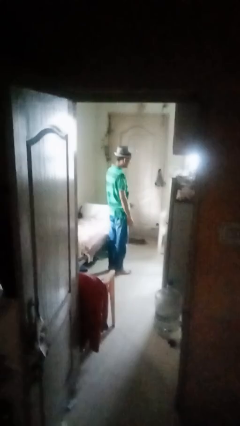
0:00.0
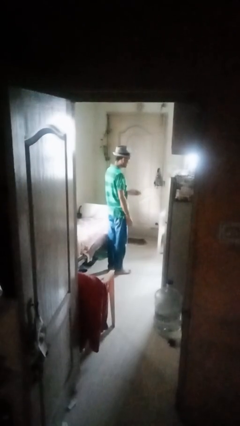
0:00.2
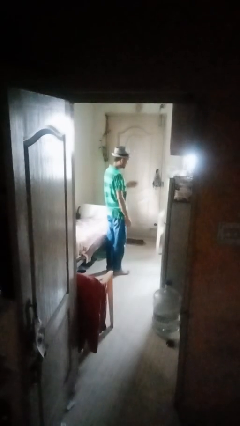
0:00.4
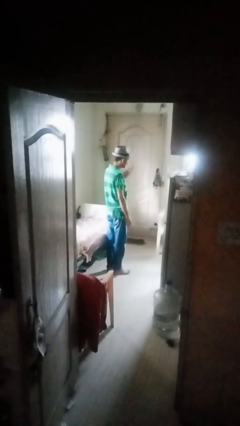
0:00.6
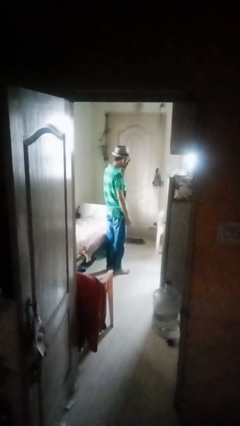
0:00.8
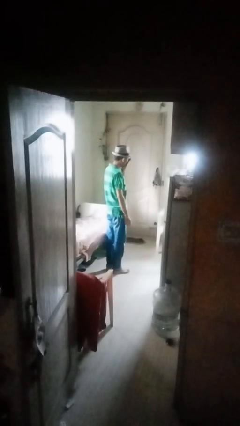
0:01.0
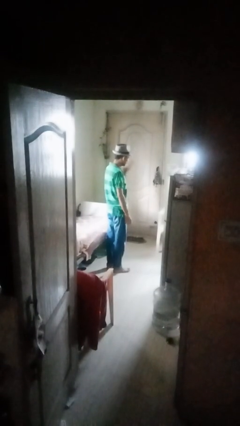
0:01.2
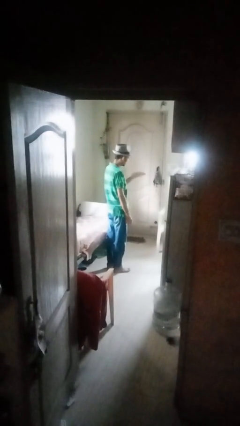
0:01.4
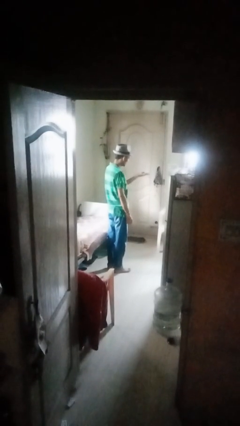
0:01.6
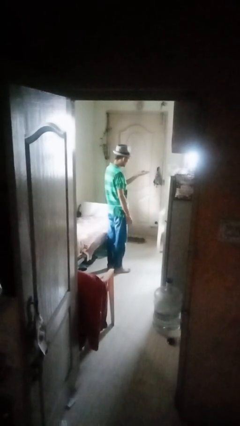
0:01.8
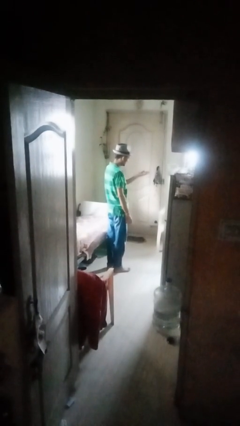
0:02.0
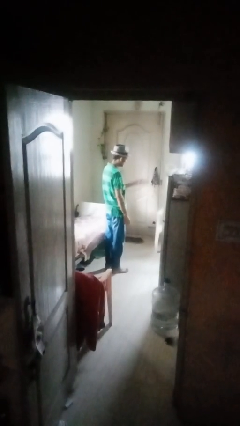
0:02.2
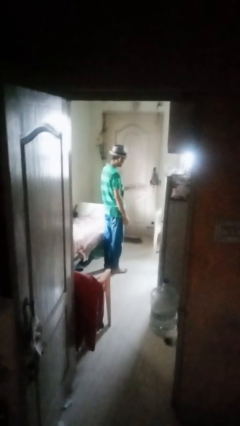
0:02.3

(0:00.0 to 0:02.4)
person gestures blow kiss

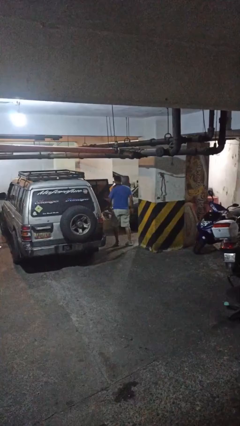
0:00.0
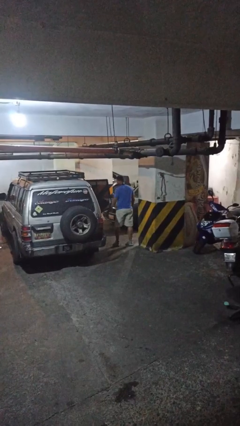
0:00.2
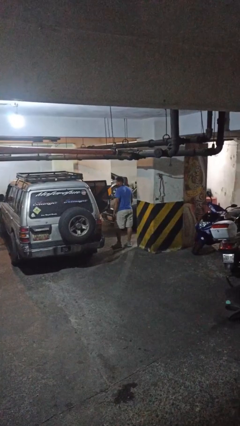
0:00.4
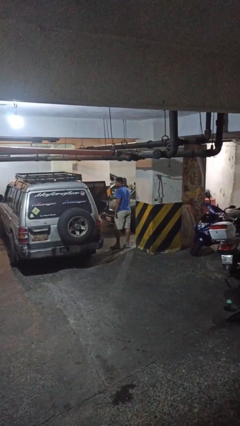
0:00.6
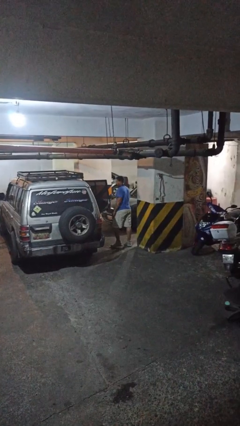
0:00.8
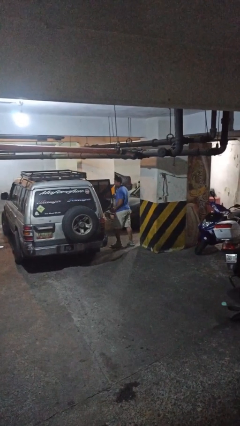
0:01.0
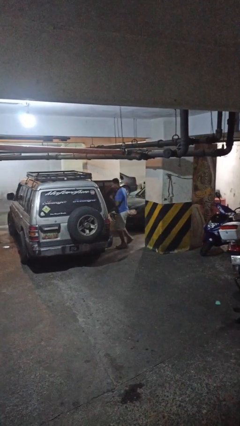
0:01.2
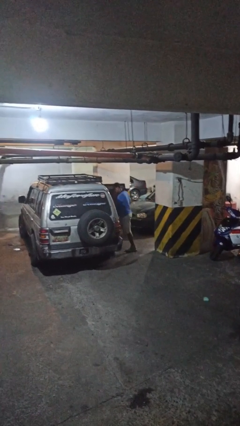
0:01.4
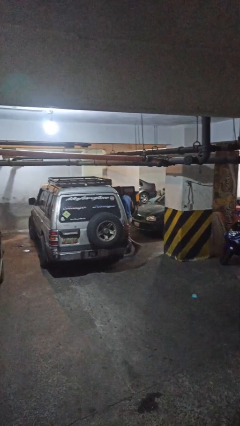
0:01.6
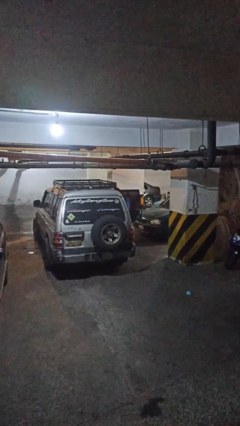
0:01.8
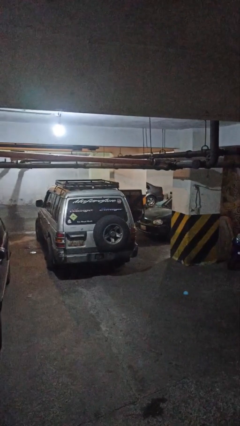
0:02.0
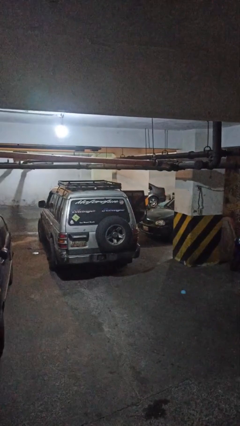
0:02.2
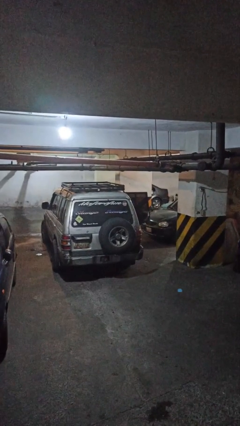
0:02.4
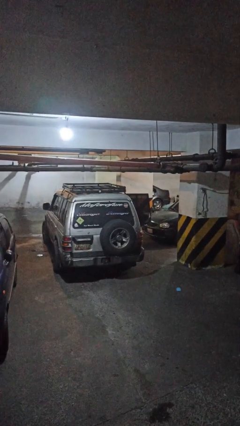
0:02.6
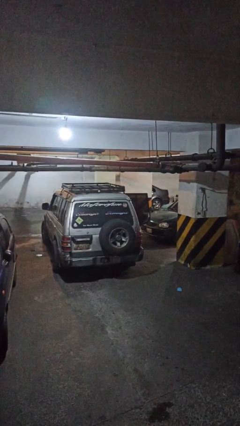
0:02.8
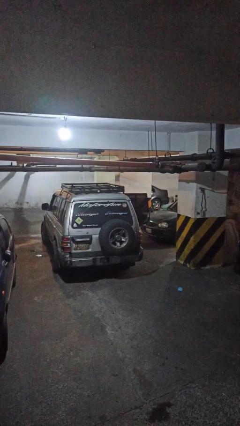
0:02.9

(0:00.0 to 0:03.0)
person enters car

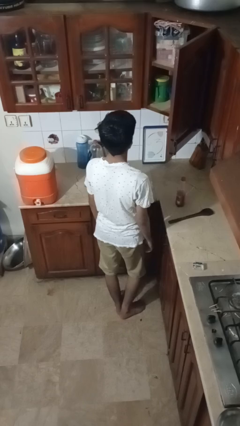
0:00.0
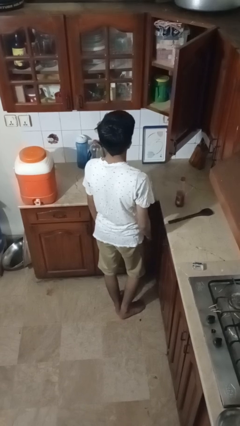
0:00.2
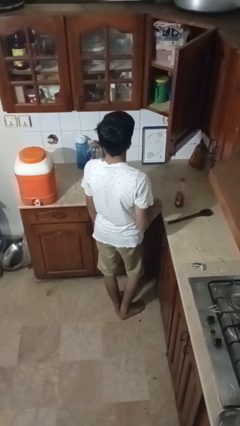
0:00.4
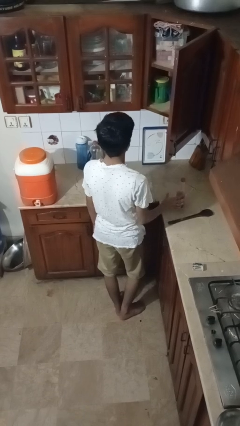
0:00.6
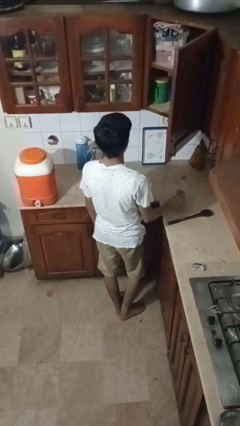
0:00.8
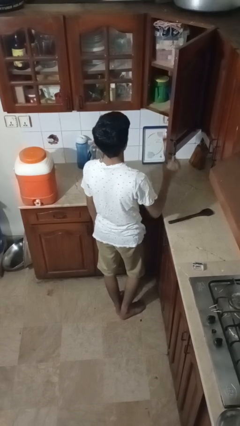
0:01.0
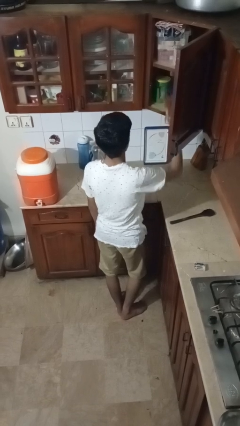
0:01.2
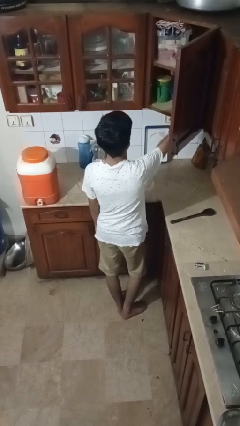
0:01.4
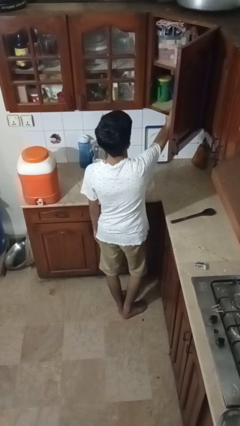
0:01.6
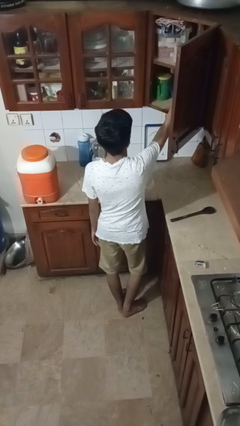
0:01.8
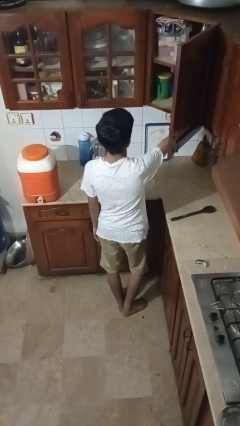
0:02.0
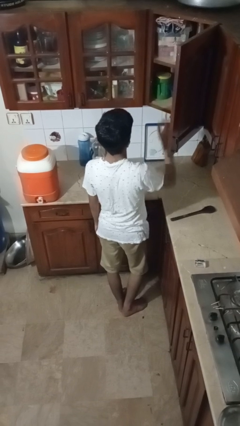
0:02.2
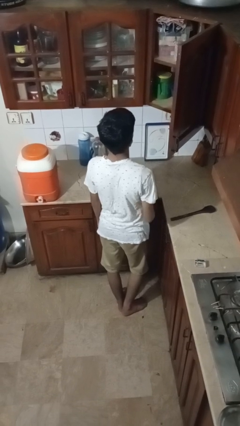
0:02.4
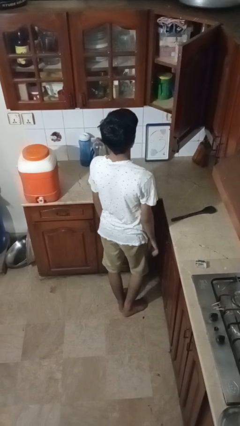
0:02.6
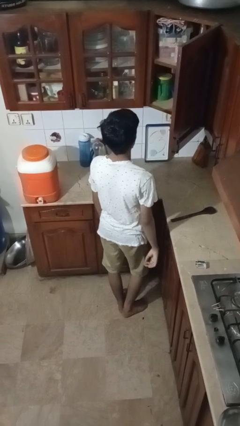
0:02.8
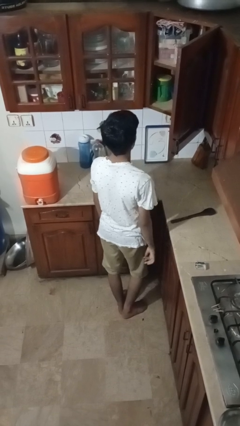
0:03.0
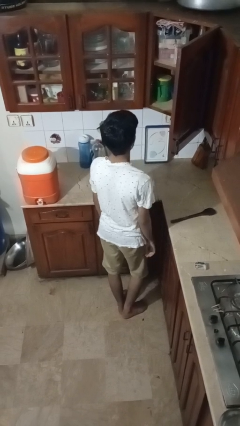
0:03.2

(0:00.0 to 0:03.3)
person puts object in cabinet

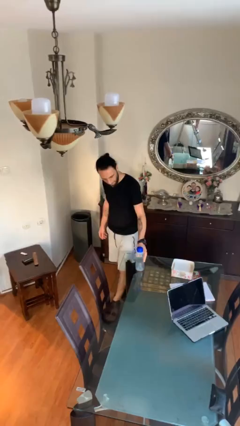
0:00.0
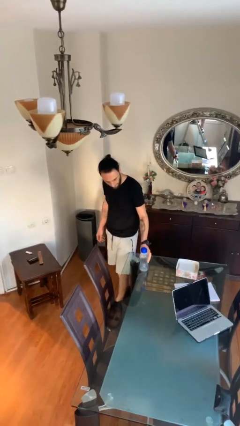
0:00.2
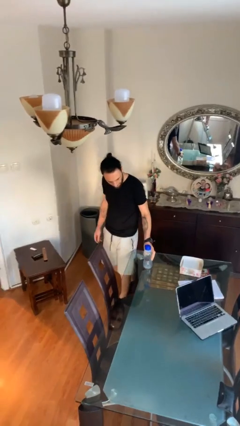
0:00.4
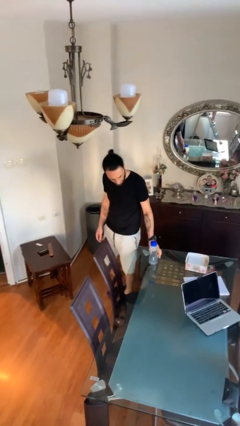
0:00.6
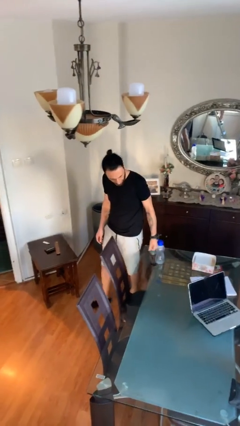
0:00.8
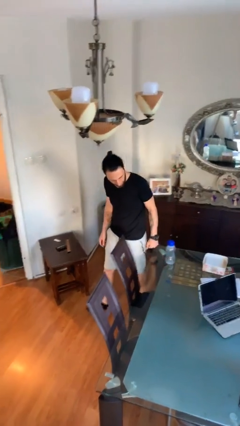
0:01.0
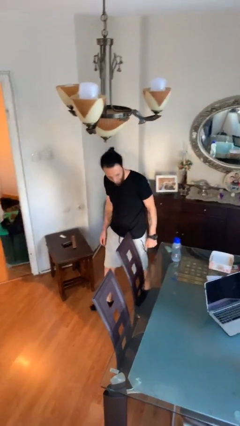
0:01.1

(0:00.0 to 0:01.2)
person puts down object on table

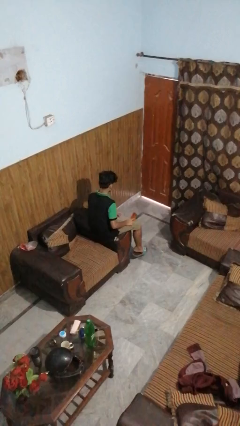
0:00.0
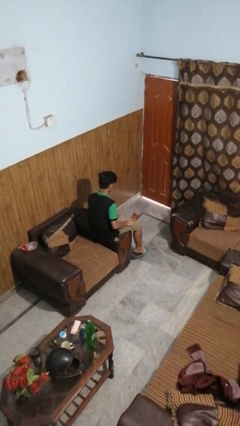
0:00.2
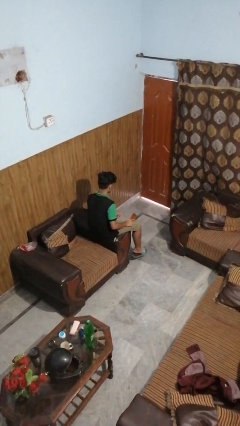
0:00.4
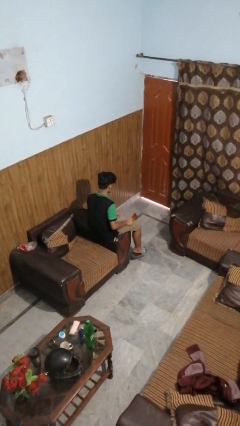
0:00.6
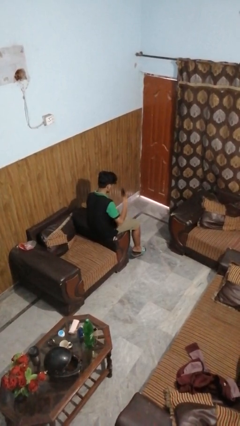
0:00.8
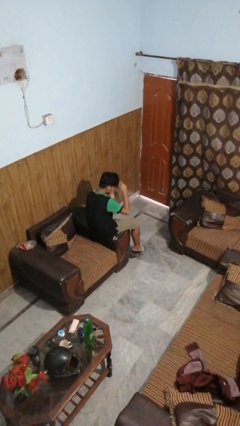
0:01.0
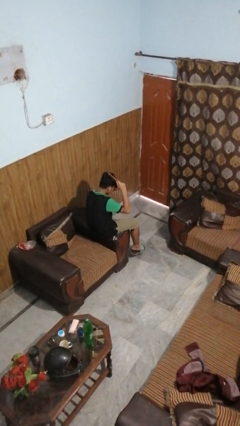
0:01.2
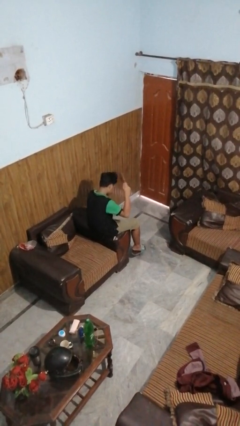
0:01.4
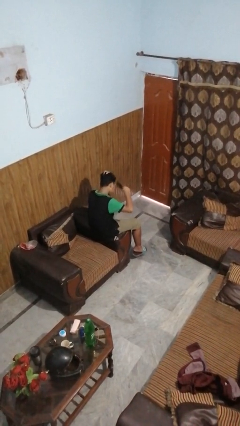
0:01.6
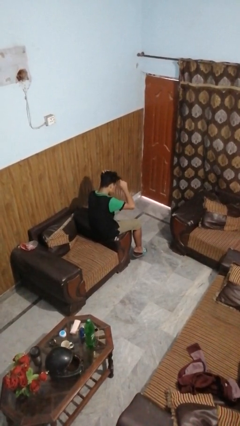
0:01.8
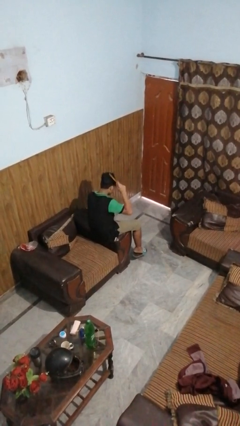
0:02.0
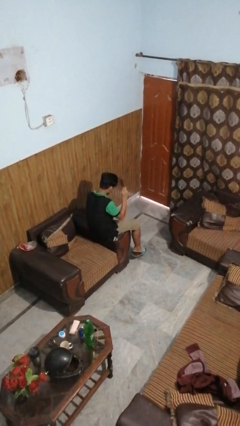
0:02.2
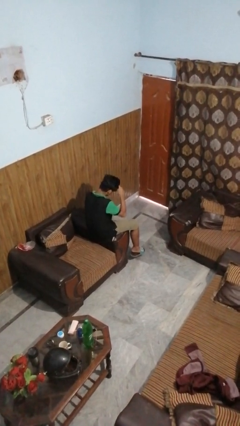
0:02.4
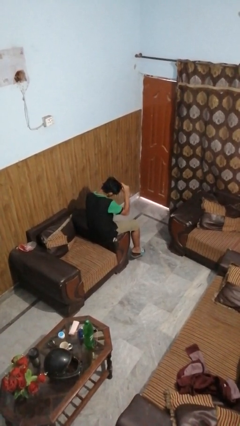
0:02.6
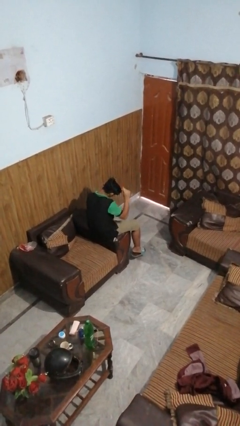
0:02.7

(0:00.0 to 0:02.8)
person brushes hair

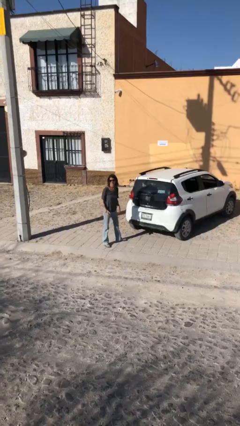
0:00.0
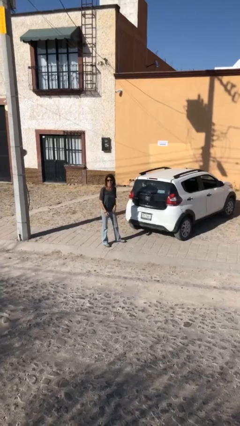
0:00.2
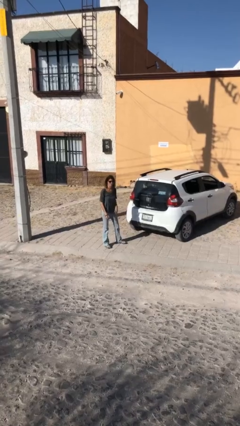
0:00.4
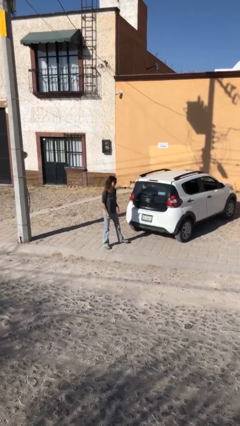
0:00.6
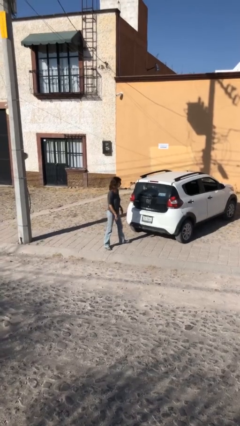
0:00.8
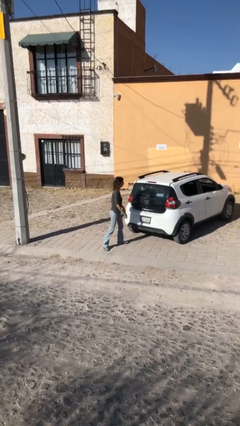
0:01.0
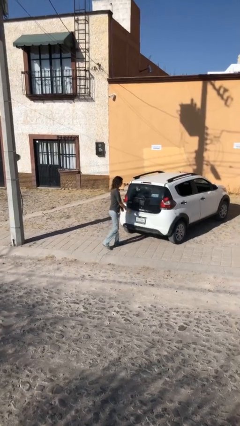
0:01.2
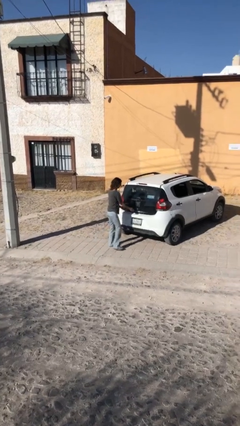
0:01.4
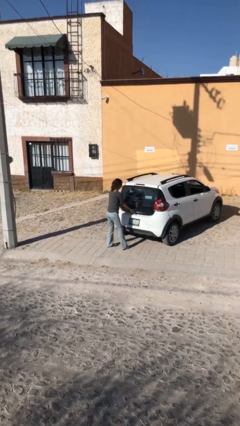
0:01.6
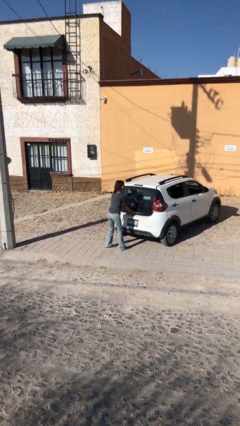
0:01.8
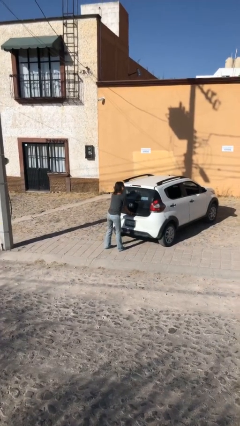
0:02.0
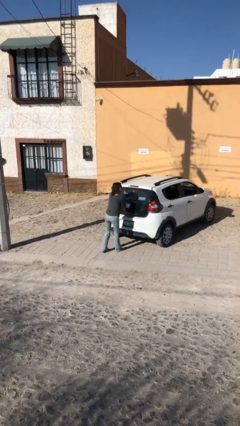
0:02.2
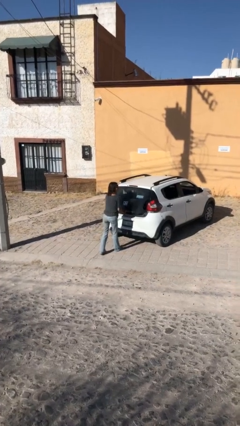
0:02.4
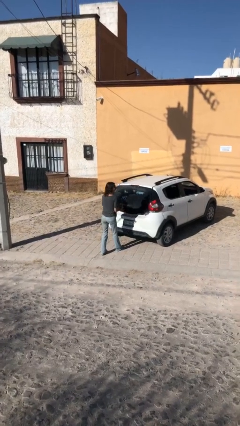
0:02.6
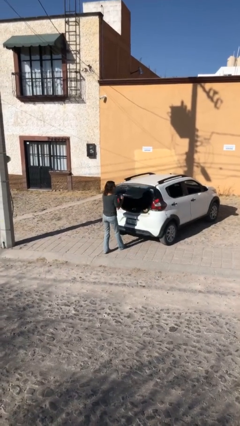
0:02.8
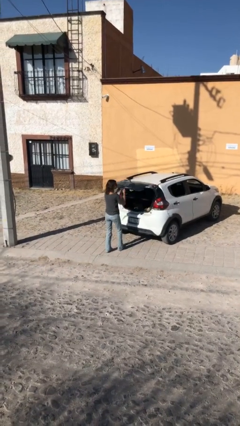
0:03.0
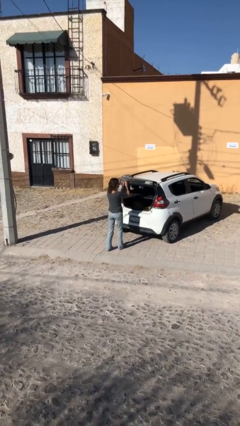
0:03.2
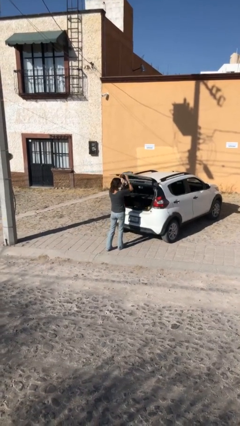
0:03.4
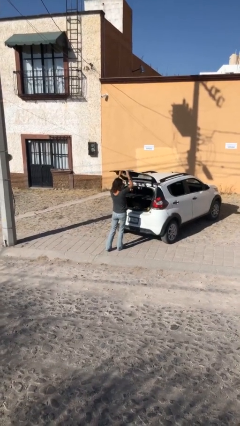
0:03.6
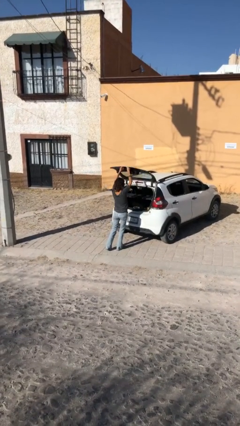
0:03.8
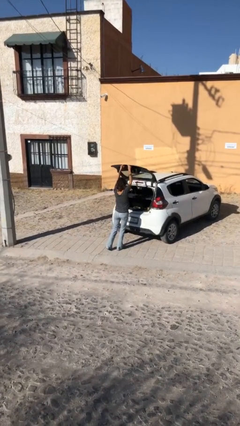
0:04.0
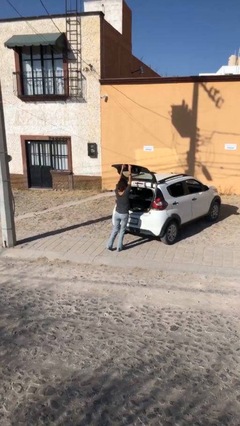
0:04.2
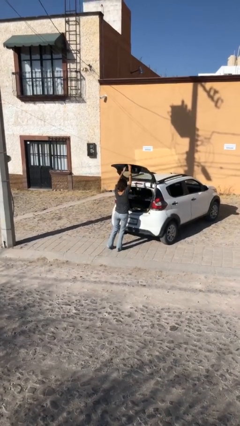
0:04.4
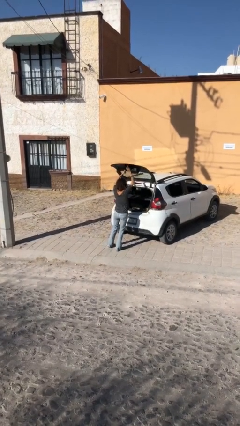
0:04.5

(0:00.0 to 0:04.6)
person opens car trunk
